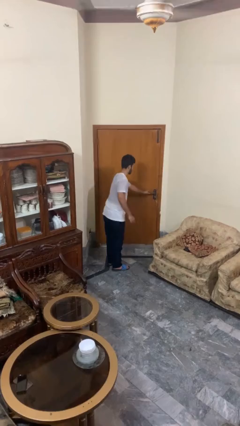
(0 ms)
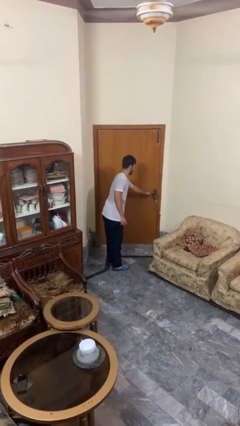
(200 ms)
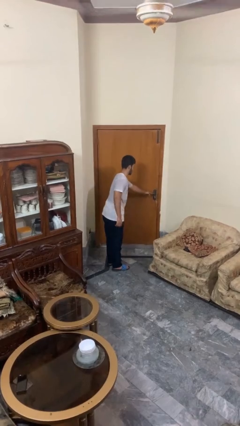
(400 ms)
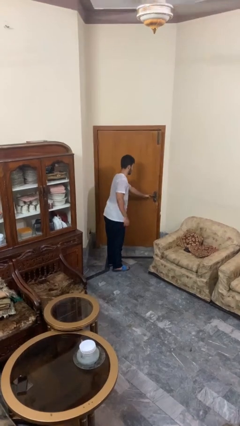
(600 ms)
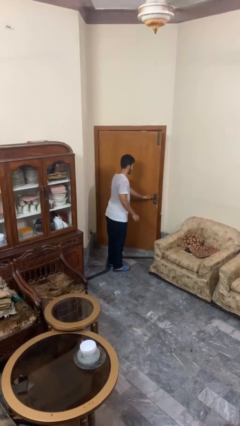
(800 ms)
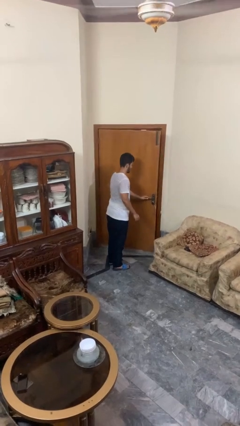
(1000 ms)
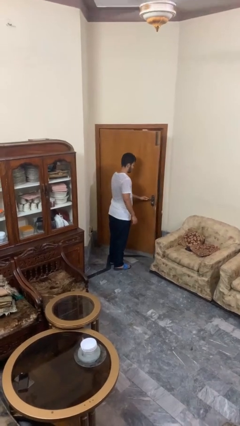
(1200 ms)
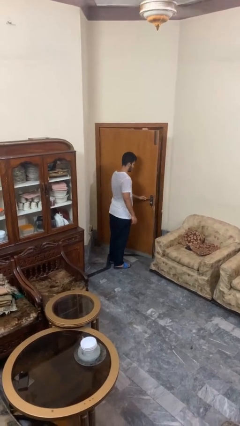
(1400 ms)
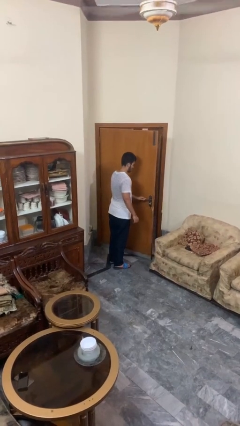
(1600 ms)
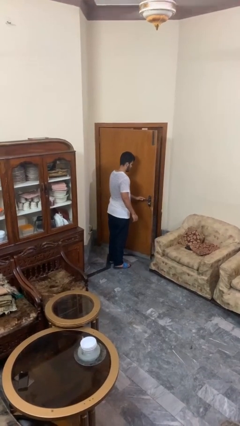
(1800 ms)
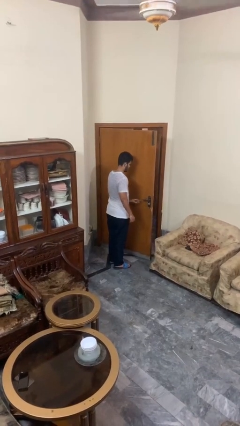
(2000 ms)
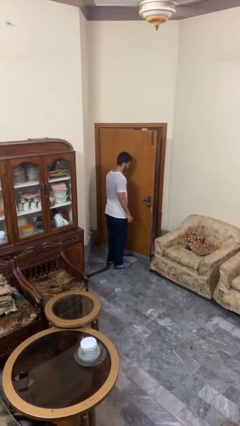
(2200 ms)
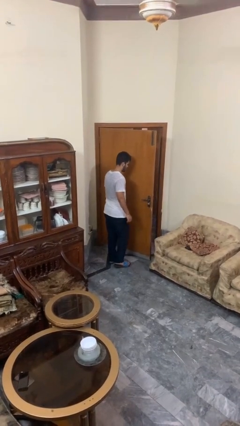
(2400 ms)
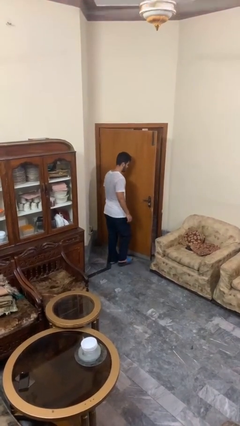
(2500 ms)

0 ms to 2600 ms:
person opens facility door

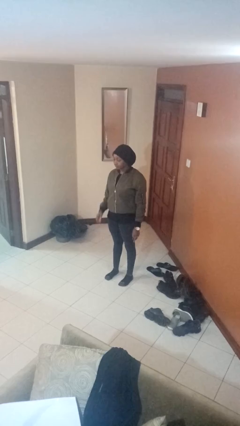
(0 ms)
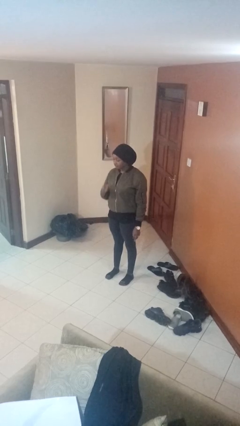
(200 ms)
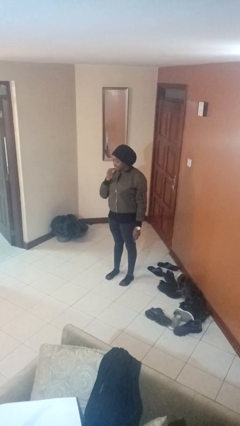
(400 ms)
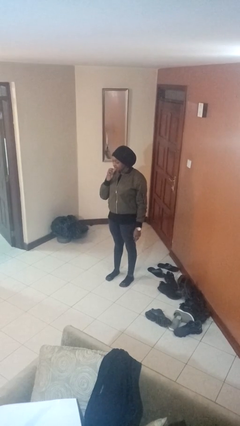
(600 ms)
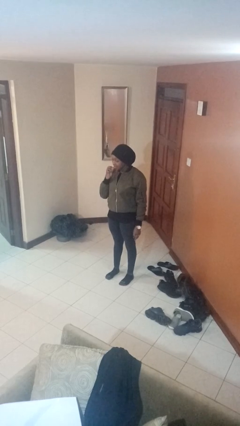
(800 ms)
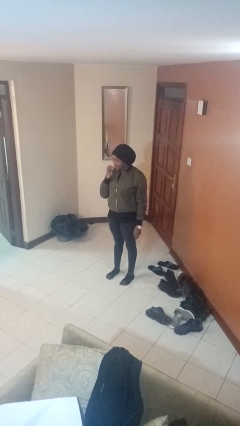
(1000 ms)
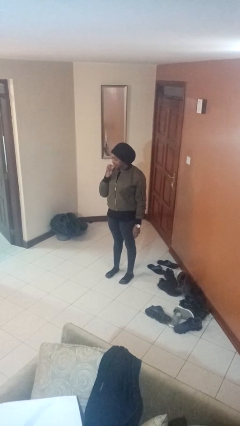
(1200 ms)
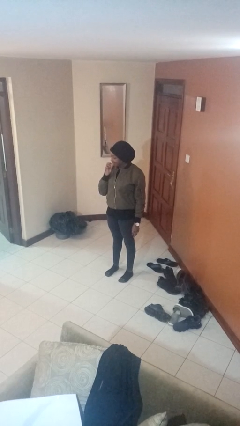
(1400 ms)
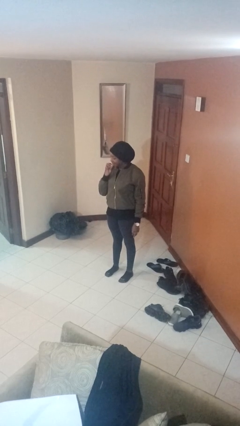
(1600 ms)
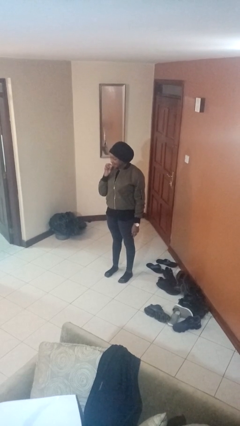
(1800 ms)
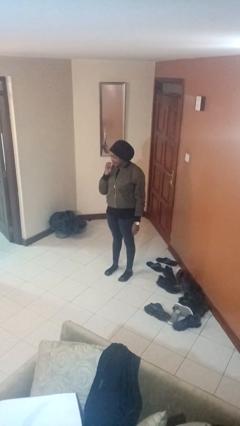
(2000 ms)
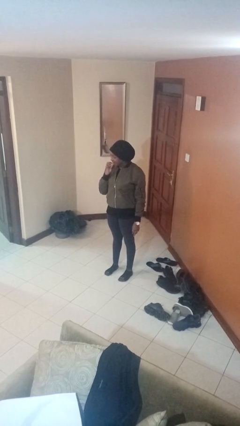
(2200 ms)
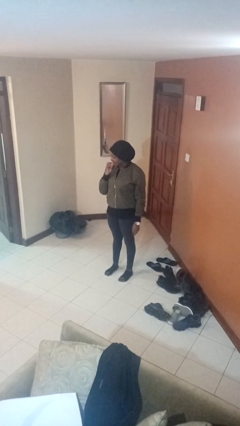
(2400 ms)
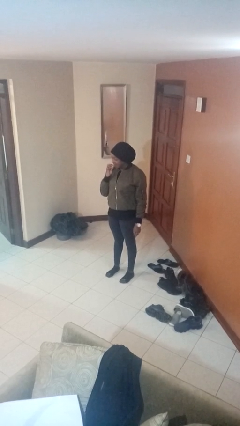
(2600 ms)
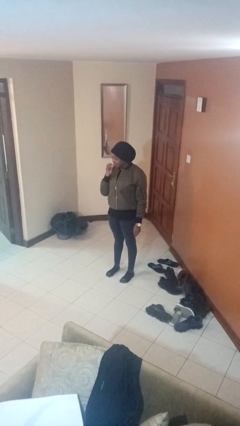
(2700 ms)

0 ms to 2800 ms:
person applies lip makeup

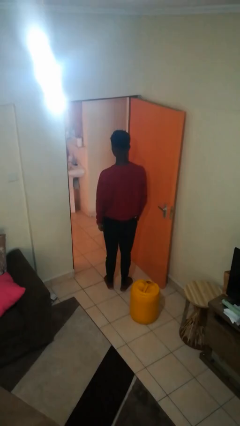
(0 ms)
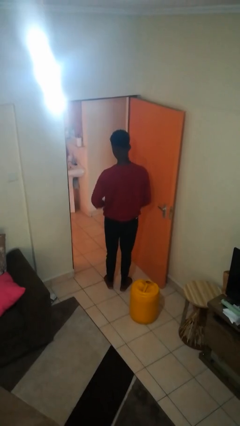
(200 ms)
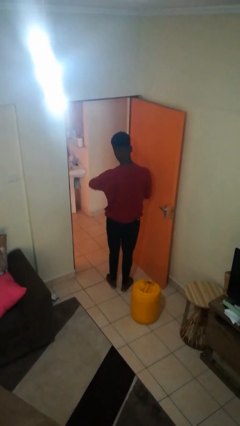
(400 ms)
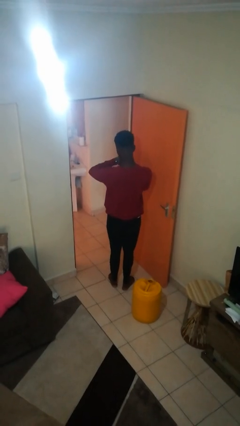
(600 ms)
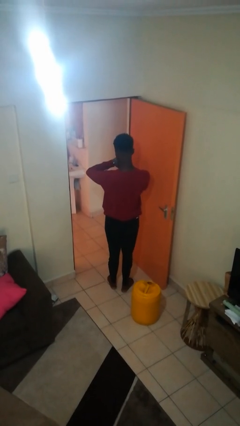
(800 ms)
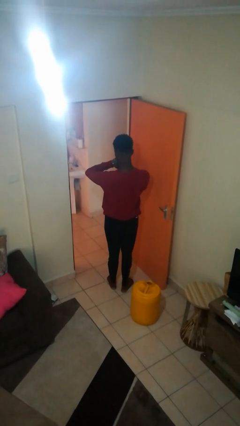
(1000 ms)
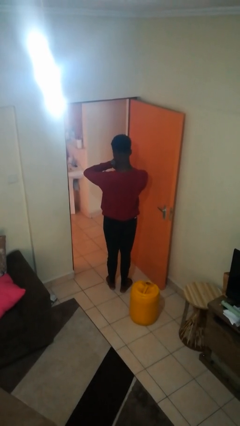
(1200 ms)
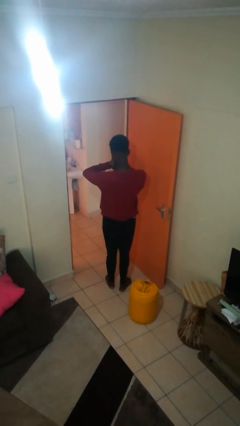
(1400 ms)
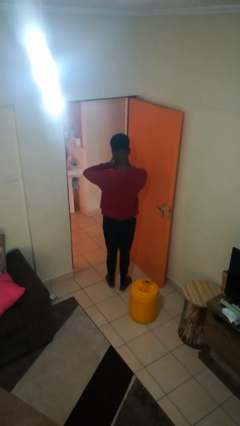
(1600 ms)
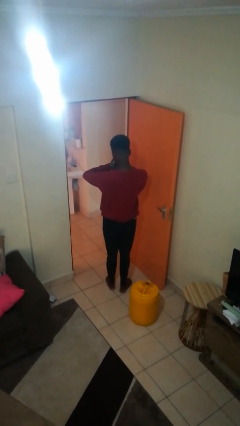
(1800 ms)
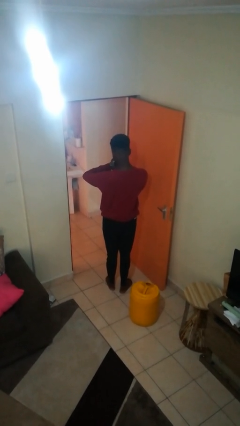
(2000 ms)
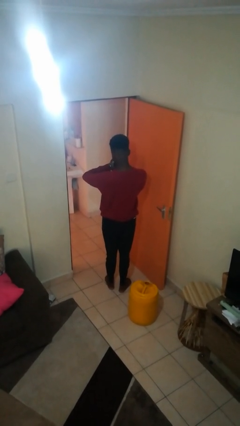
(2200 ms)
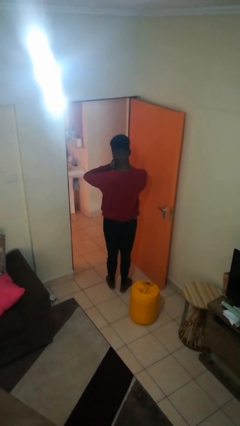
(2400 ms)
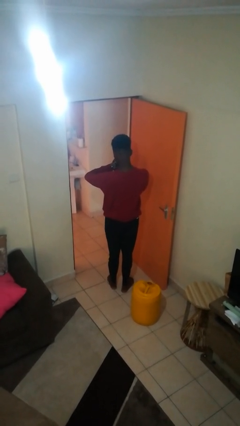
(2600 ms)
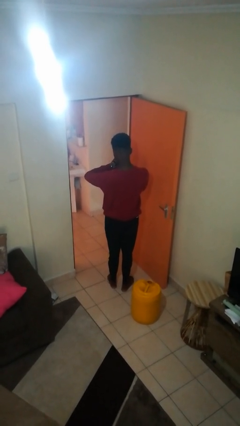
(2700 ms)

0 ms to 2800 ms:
person looks at wristwatch

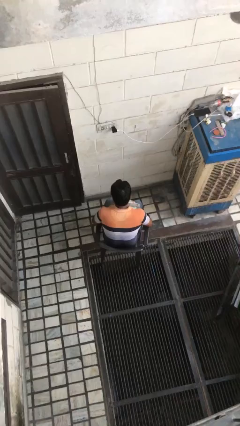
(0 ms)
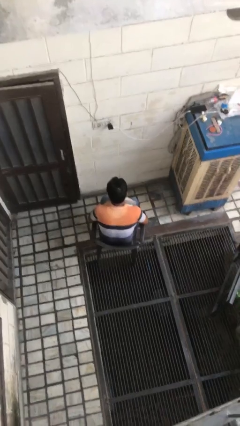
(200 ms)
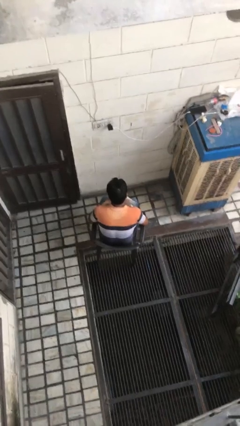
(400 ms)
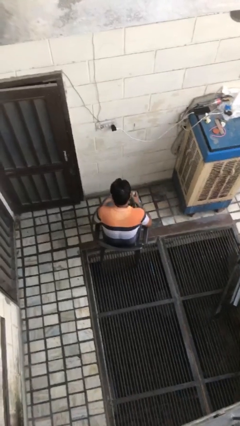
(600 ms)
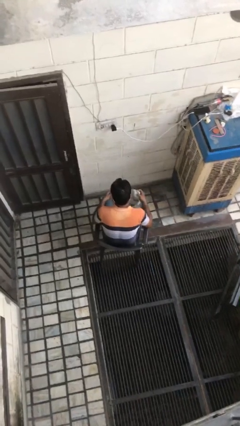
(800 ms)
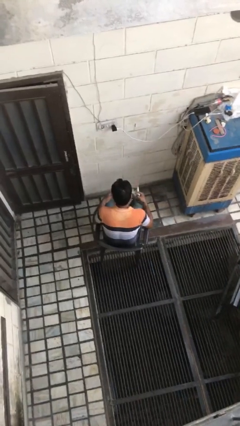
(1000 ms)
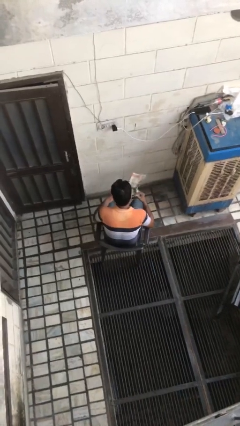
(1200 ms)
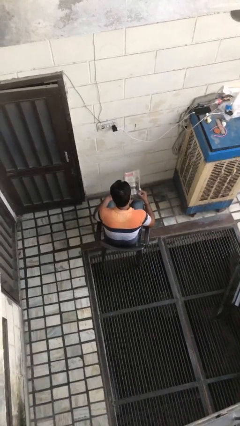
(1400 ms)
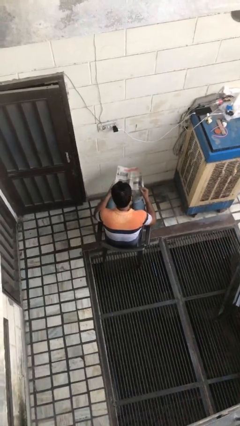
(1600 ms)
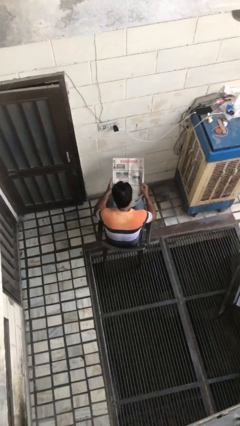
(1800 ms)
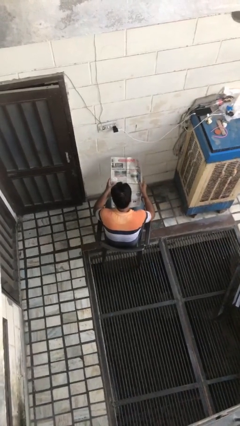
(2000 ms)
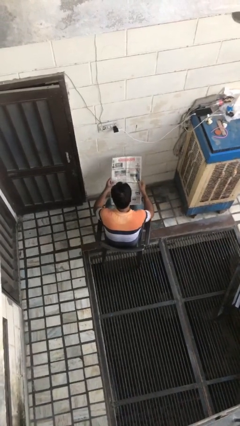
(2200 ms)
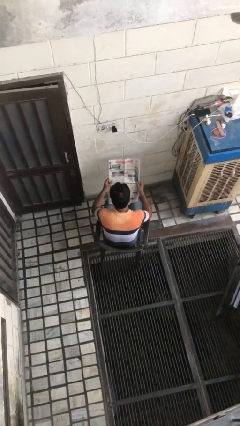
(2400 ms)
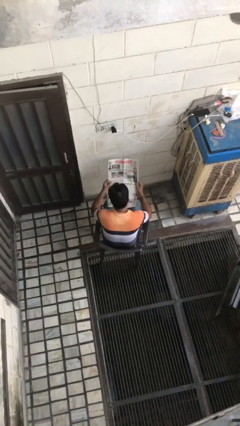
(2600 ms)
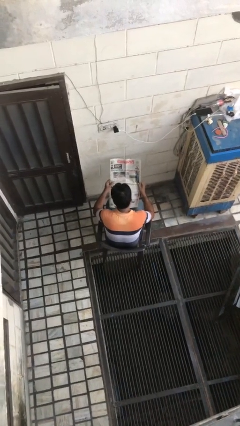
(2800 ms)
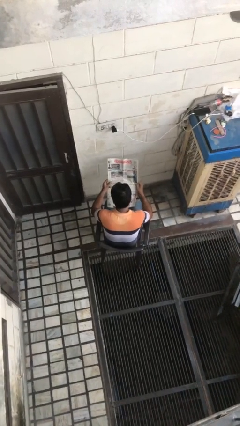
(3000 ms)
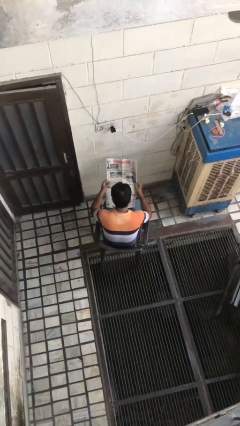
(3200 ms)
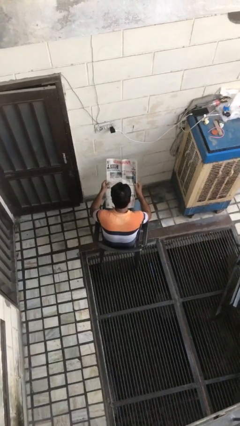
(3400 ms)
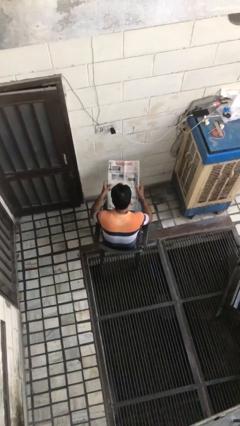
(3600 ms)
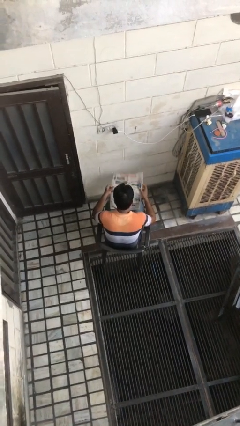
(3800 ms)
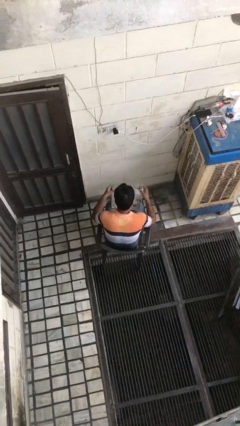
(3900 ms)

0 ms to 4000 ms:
person reads newspaper

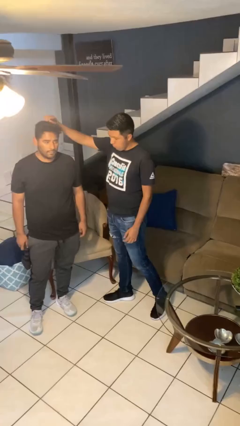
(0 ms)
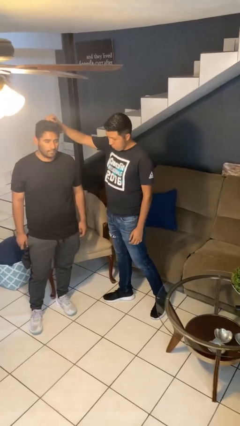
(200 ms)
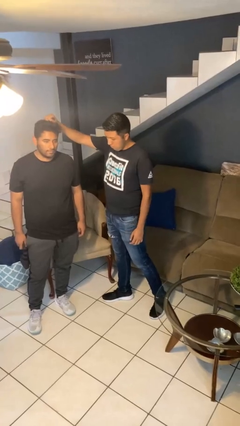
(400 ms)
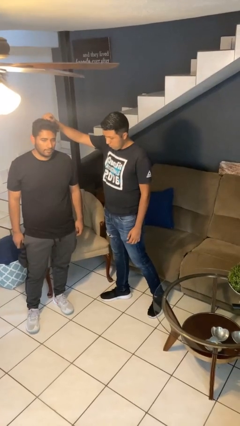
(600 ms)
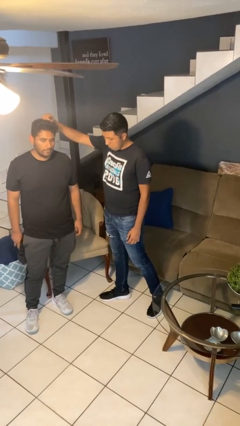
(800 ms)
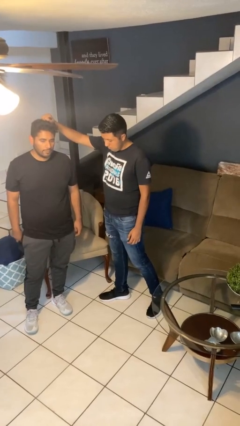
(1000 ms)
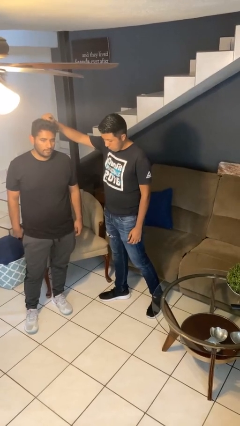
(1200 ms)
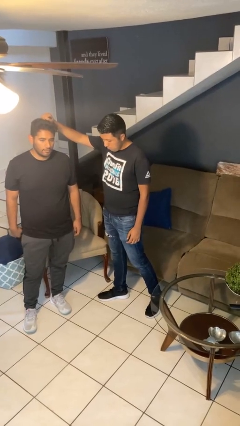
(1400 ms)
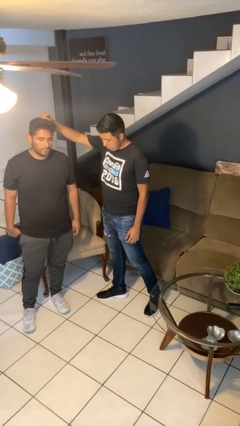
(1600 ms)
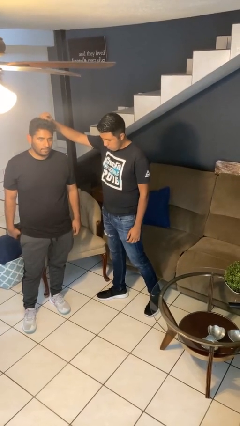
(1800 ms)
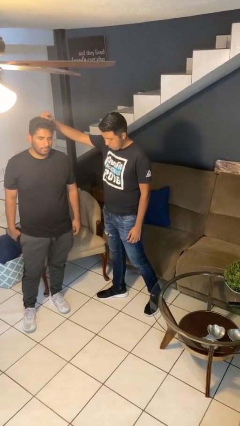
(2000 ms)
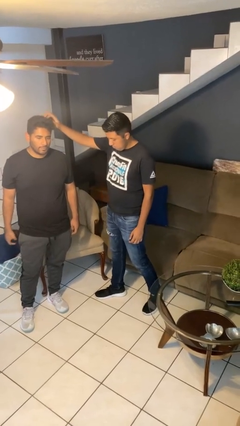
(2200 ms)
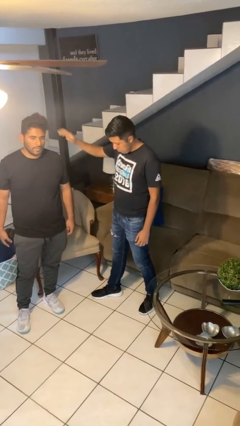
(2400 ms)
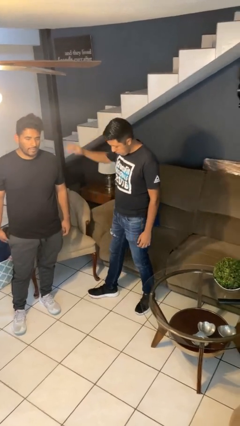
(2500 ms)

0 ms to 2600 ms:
person grabs person by hair

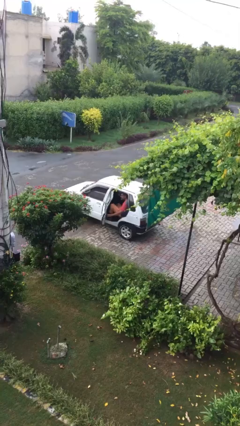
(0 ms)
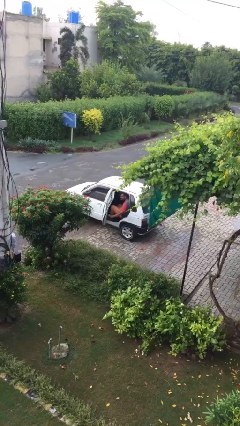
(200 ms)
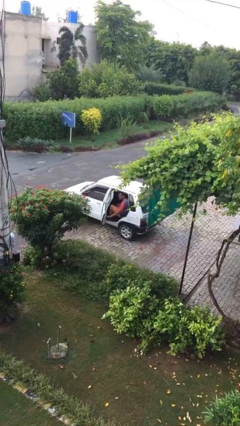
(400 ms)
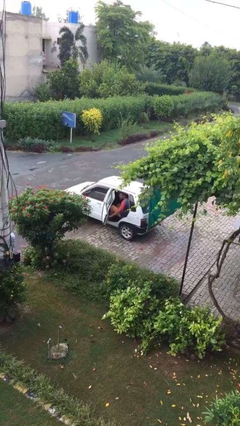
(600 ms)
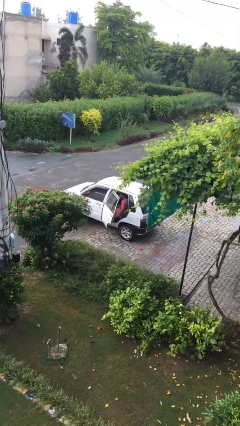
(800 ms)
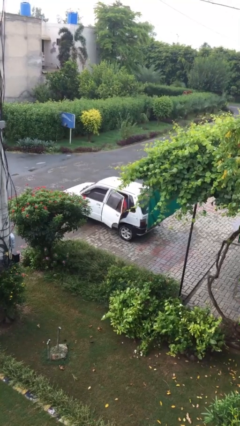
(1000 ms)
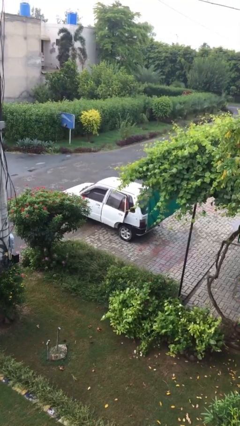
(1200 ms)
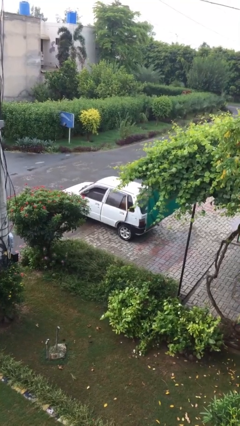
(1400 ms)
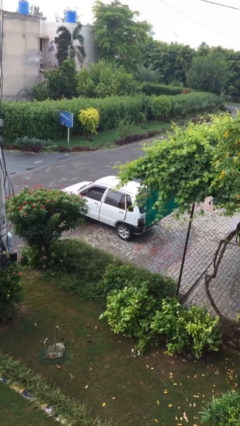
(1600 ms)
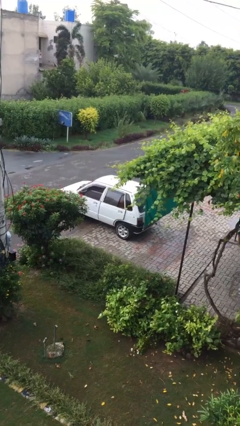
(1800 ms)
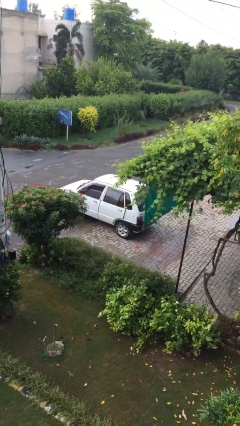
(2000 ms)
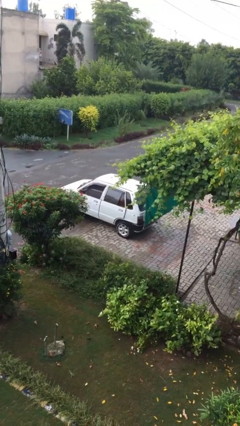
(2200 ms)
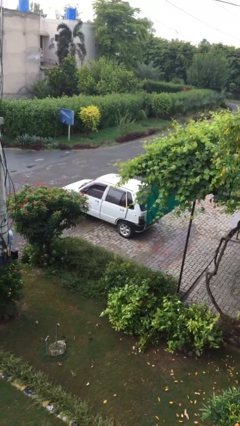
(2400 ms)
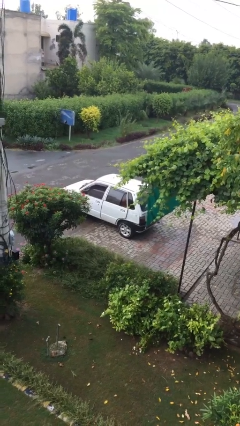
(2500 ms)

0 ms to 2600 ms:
person closes car door

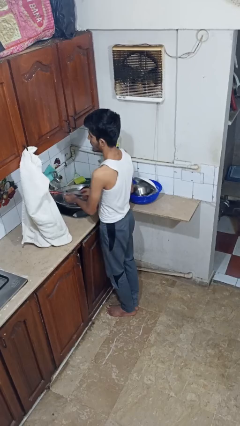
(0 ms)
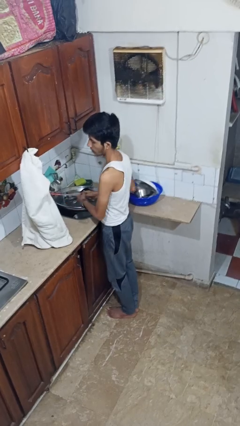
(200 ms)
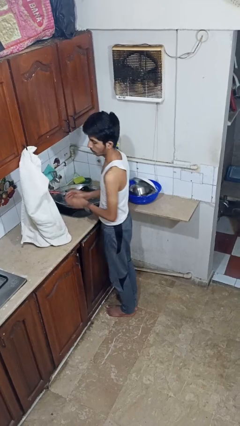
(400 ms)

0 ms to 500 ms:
person dries hands with towel
